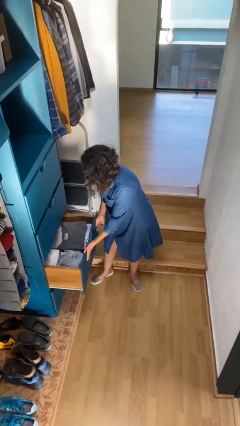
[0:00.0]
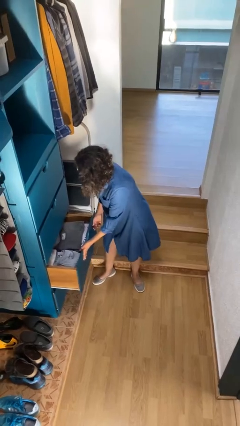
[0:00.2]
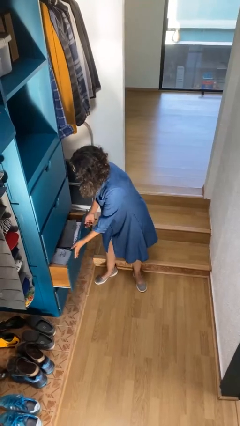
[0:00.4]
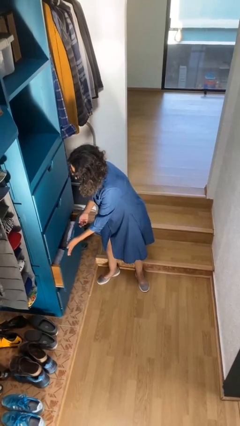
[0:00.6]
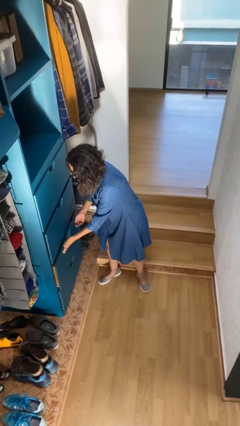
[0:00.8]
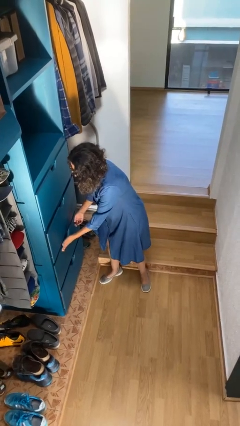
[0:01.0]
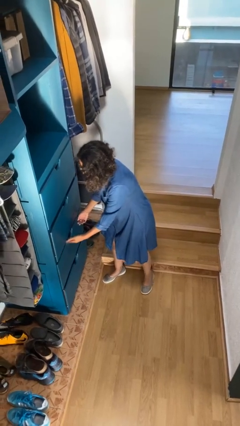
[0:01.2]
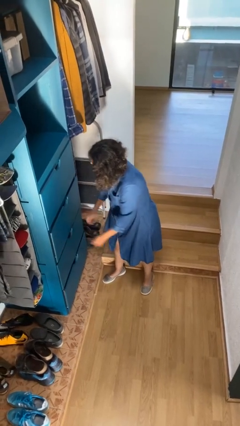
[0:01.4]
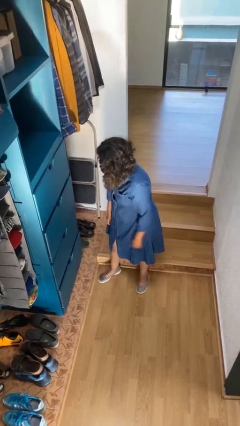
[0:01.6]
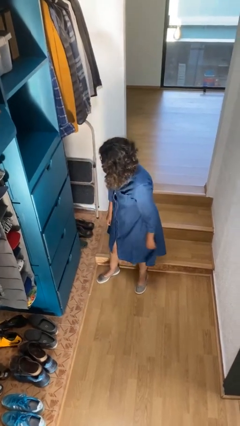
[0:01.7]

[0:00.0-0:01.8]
person closes dresser drawer

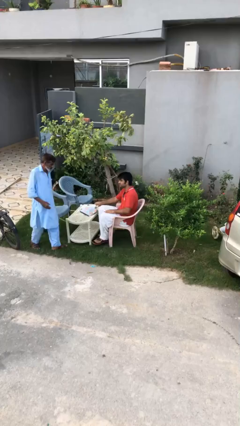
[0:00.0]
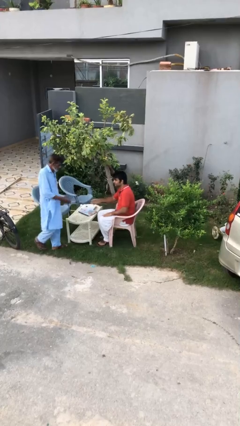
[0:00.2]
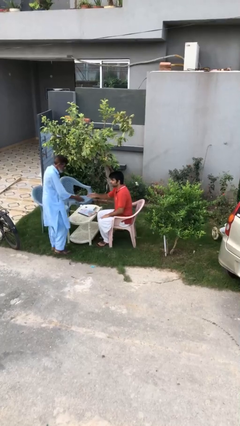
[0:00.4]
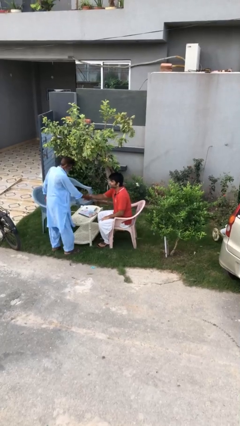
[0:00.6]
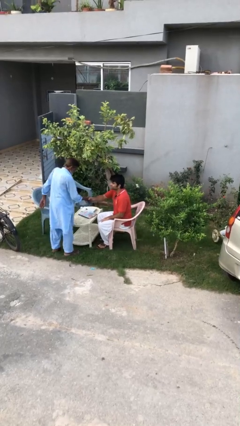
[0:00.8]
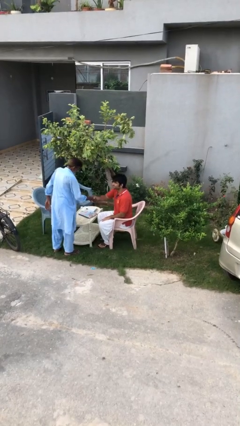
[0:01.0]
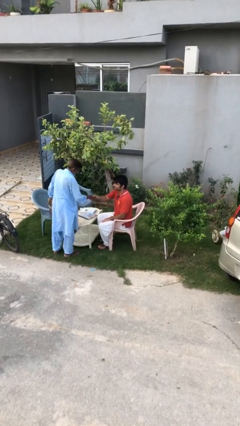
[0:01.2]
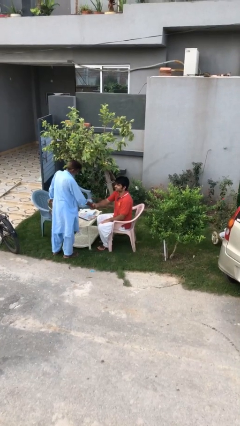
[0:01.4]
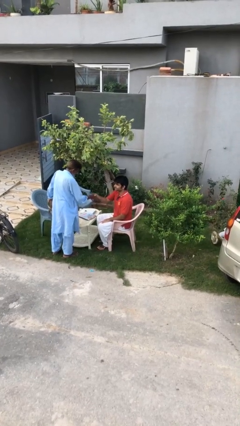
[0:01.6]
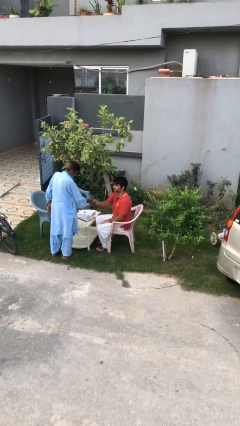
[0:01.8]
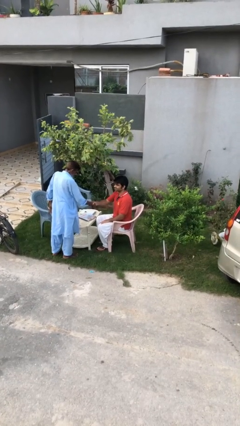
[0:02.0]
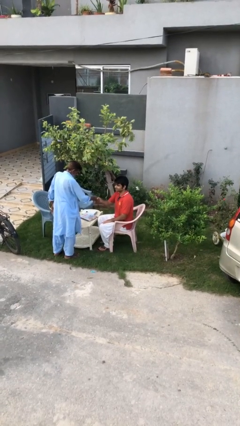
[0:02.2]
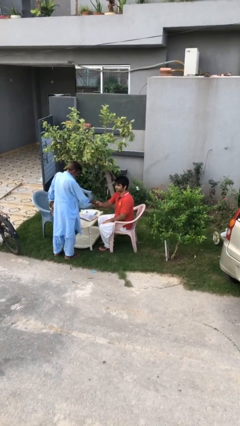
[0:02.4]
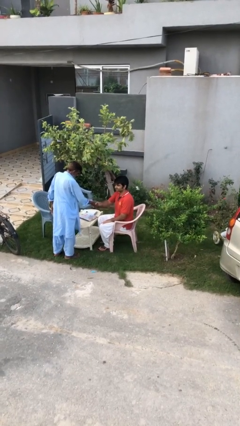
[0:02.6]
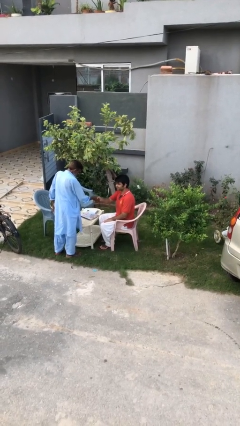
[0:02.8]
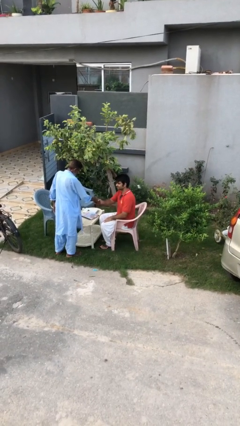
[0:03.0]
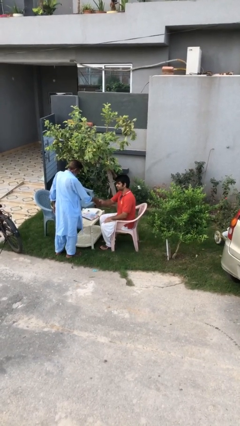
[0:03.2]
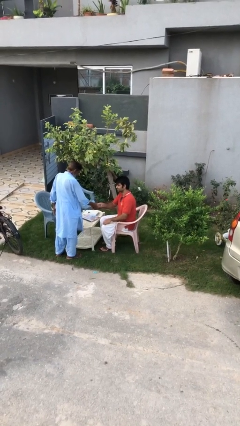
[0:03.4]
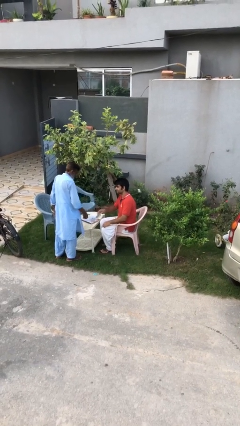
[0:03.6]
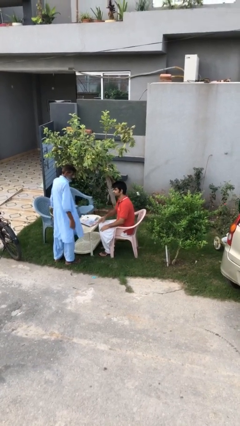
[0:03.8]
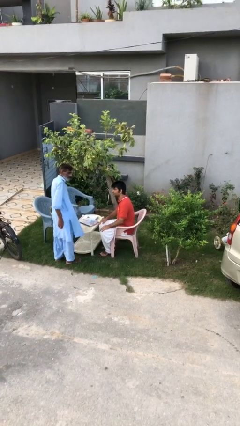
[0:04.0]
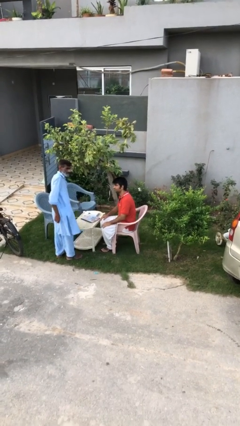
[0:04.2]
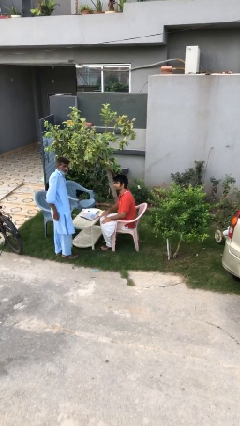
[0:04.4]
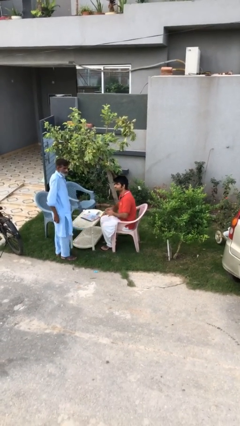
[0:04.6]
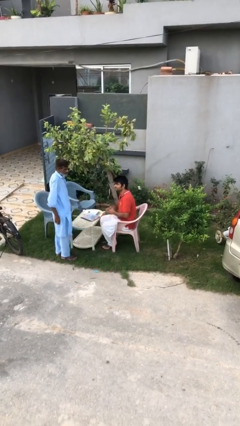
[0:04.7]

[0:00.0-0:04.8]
person shakes hand

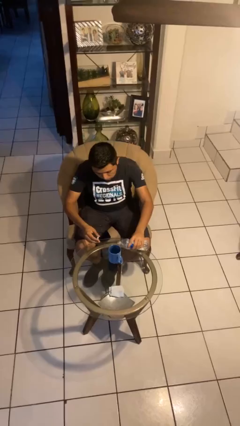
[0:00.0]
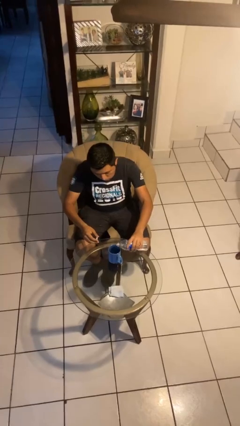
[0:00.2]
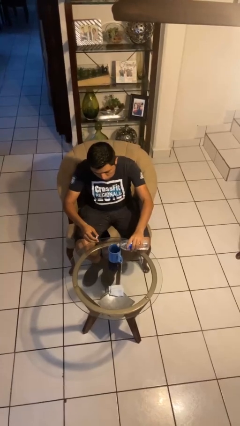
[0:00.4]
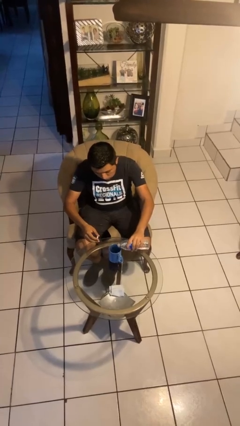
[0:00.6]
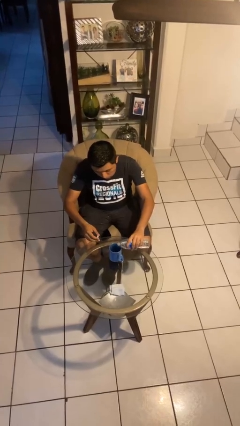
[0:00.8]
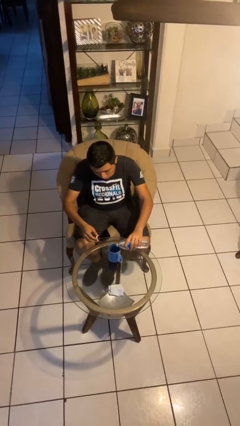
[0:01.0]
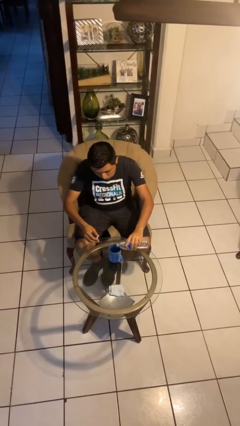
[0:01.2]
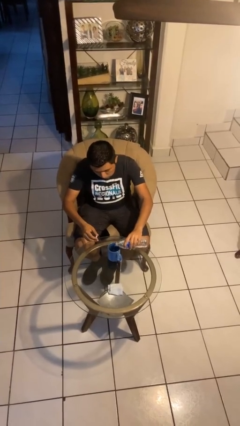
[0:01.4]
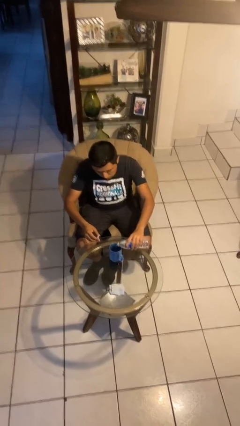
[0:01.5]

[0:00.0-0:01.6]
person pours liquid into cup

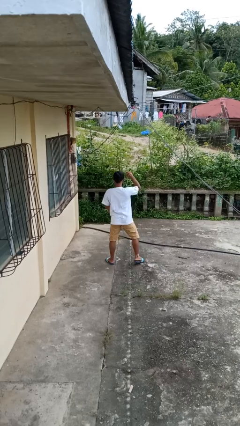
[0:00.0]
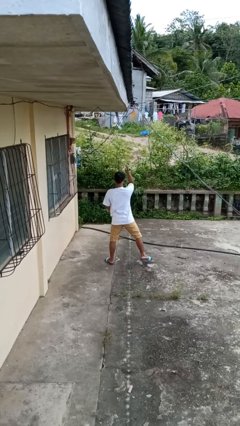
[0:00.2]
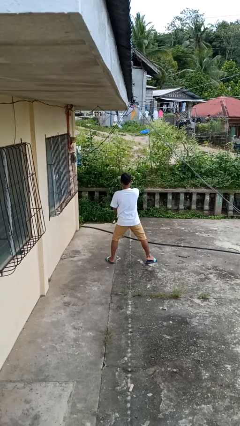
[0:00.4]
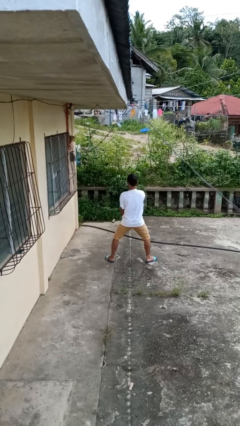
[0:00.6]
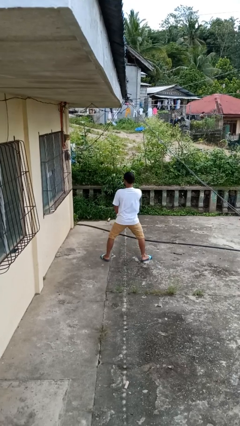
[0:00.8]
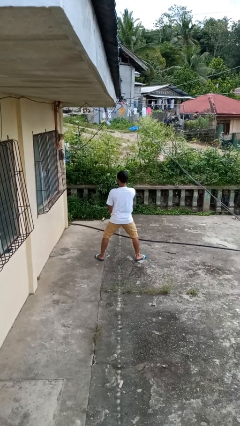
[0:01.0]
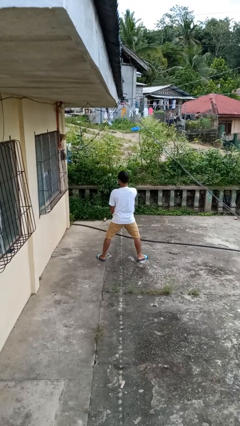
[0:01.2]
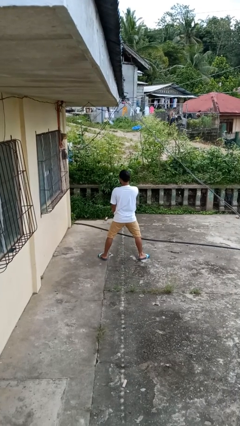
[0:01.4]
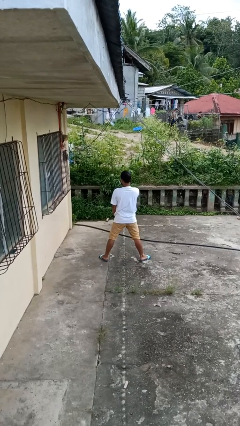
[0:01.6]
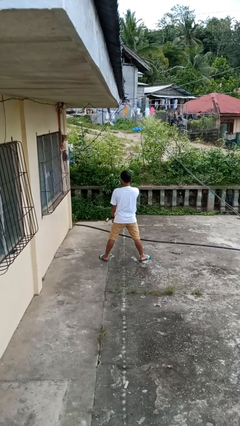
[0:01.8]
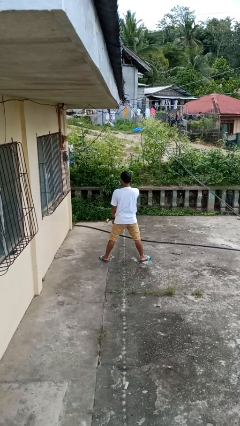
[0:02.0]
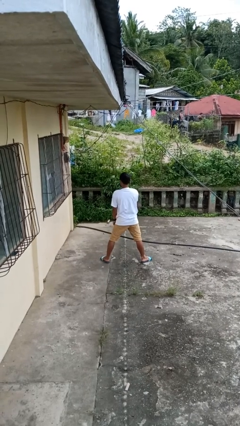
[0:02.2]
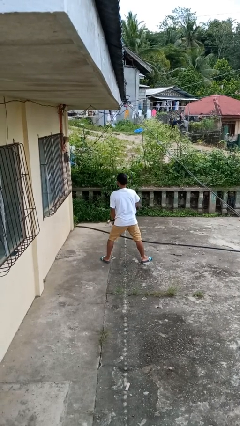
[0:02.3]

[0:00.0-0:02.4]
person karate chop

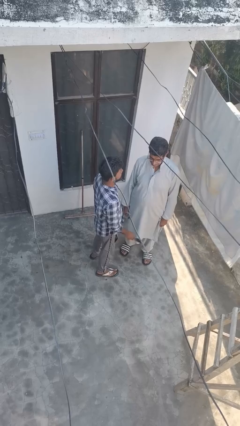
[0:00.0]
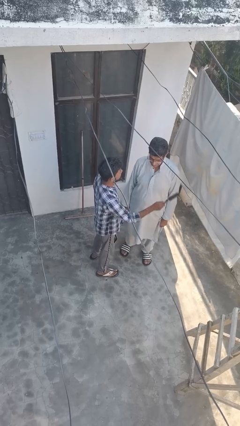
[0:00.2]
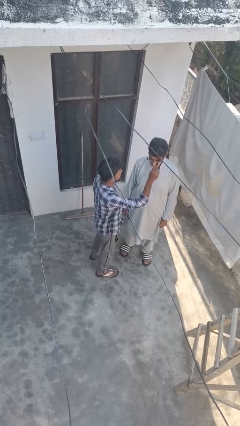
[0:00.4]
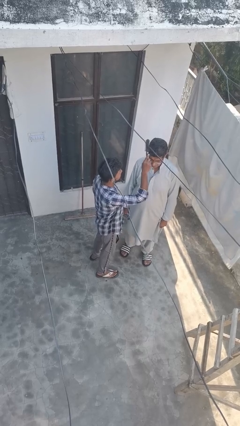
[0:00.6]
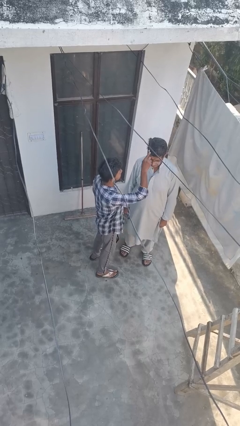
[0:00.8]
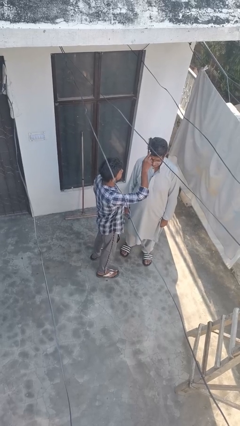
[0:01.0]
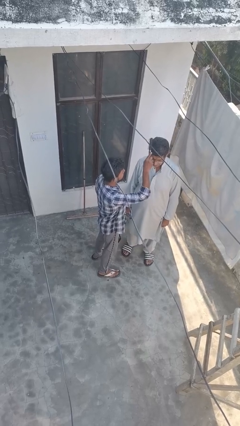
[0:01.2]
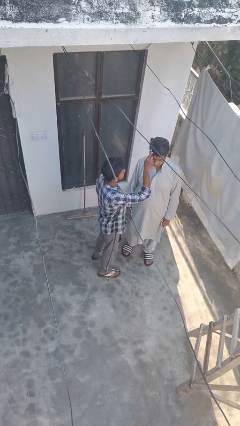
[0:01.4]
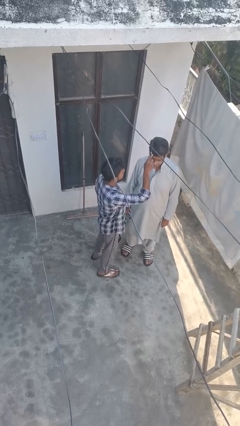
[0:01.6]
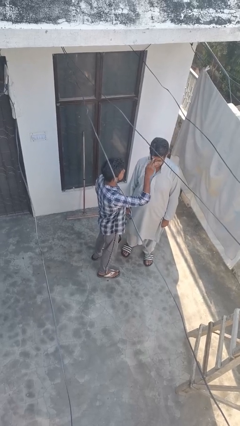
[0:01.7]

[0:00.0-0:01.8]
person brushes hair of person

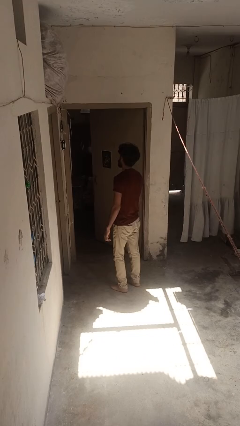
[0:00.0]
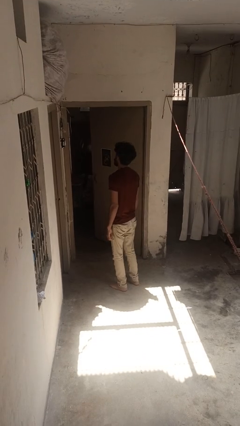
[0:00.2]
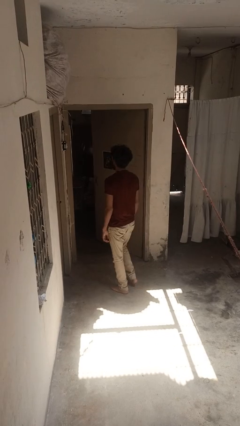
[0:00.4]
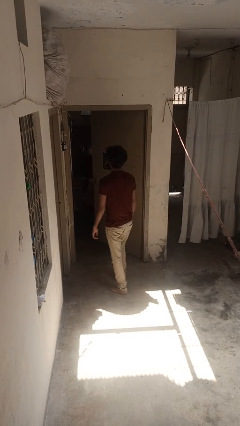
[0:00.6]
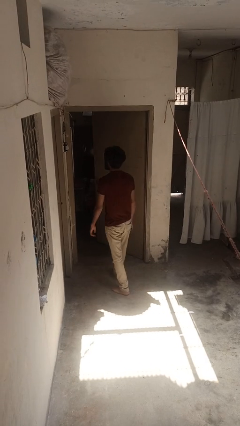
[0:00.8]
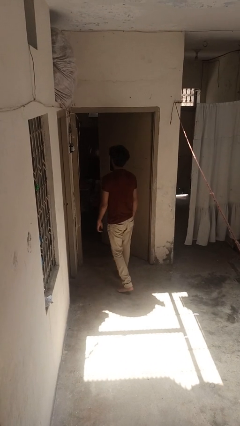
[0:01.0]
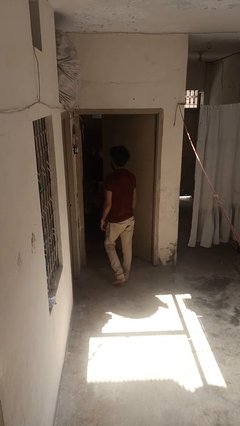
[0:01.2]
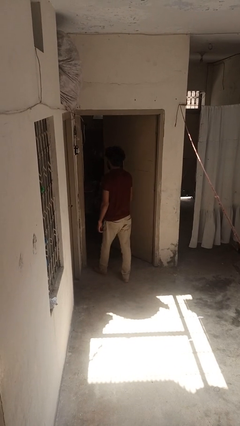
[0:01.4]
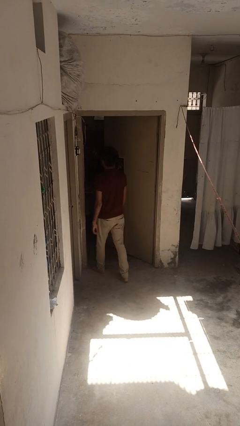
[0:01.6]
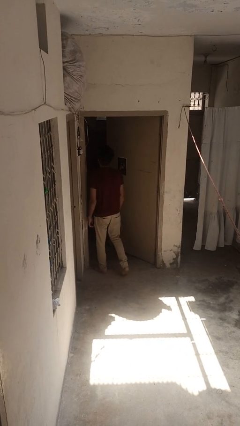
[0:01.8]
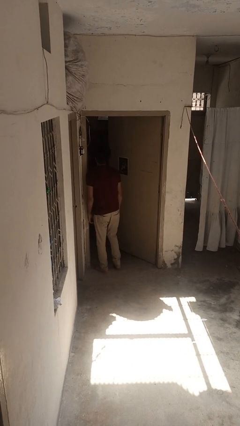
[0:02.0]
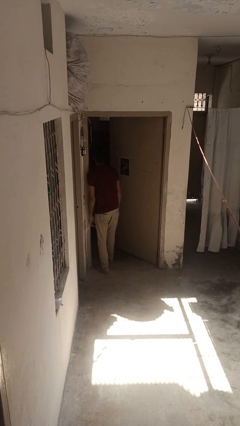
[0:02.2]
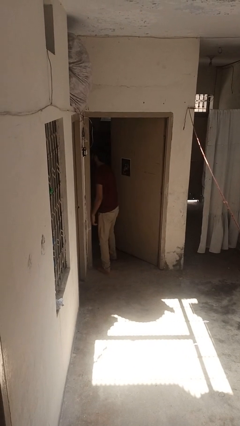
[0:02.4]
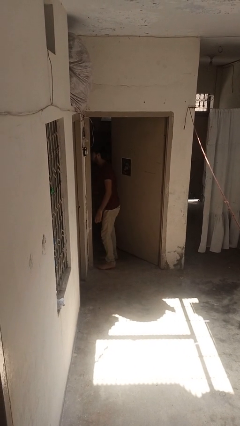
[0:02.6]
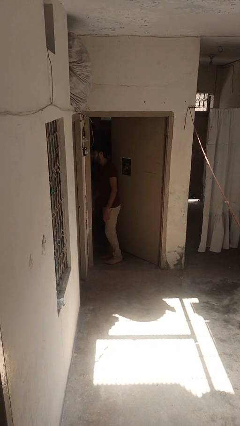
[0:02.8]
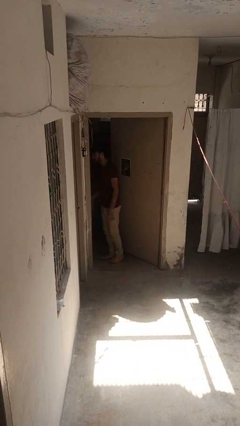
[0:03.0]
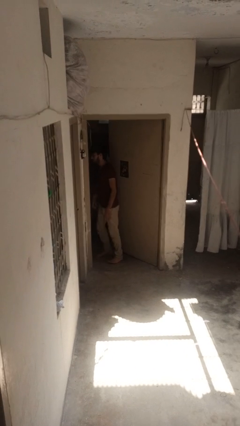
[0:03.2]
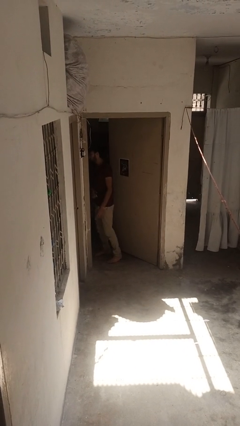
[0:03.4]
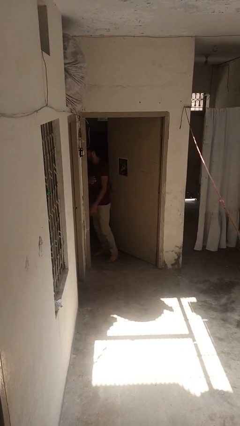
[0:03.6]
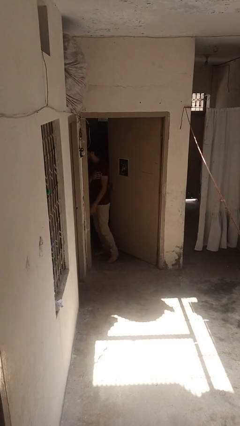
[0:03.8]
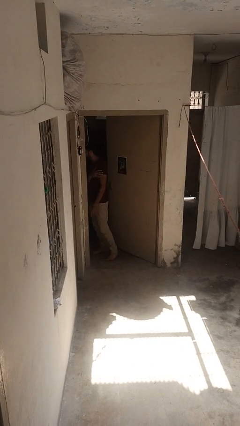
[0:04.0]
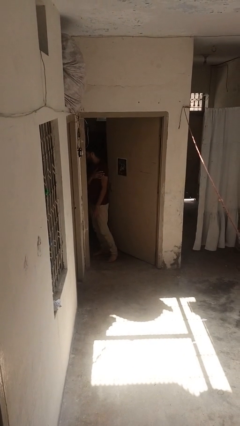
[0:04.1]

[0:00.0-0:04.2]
person bumps into wall

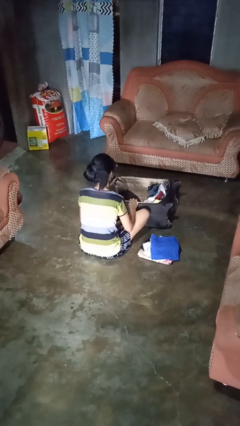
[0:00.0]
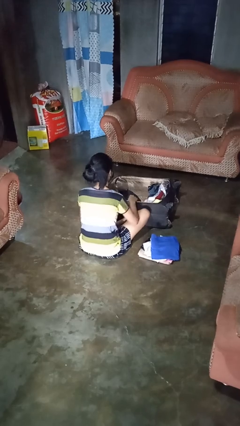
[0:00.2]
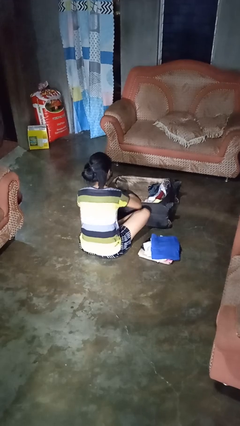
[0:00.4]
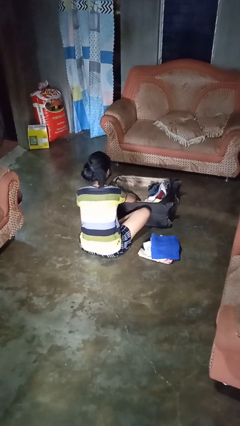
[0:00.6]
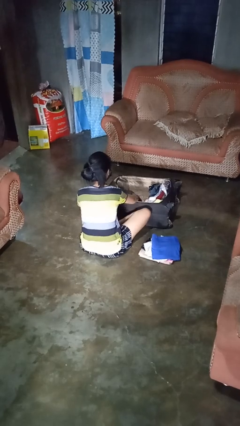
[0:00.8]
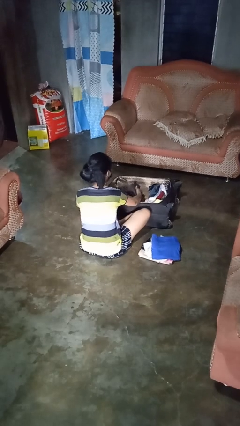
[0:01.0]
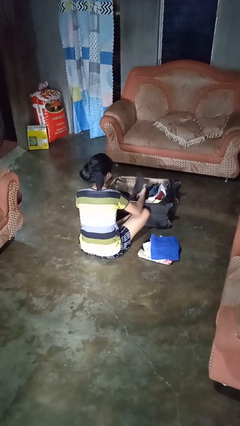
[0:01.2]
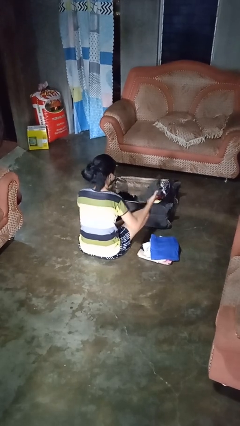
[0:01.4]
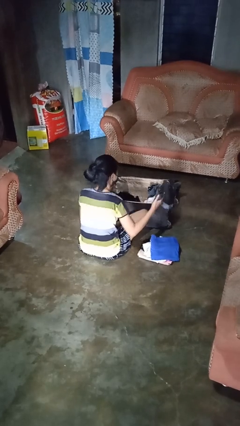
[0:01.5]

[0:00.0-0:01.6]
person unloads clothes from suitcase
